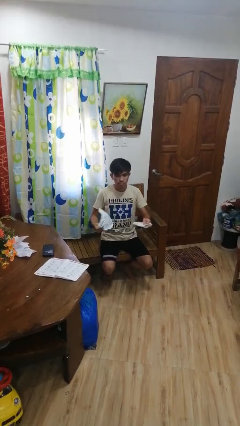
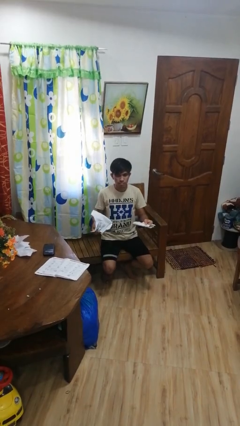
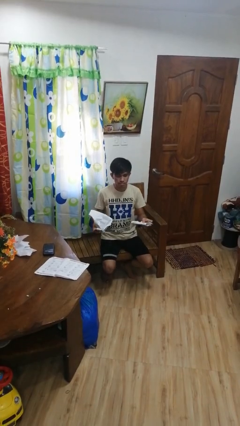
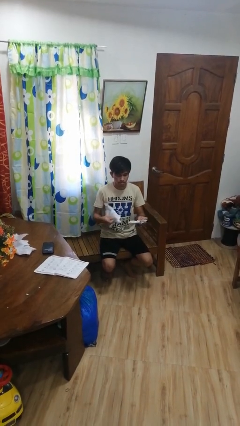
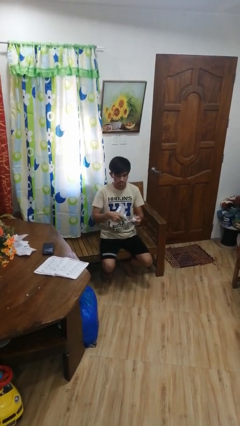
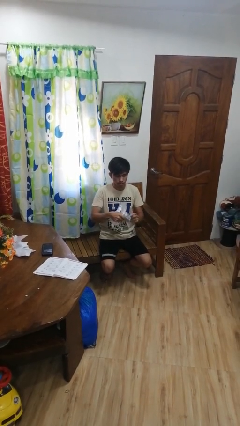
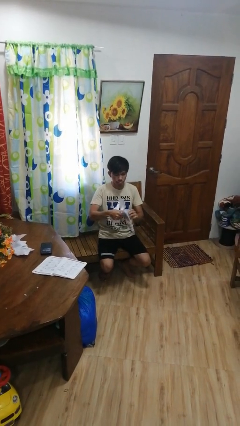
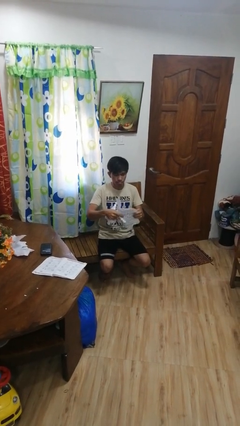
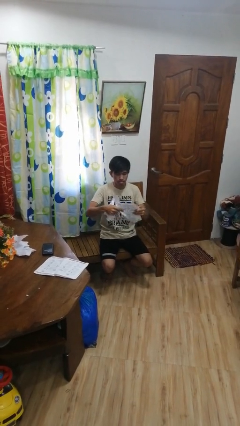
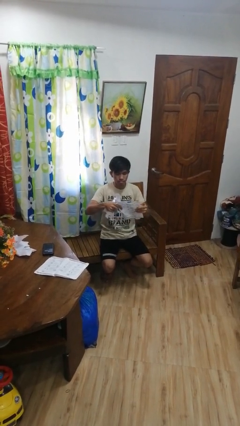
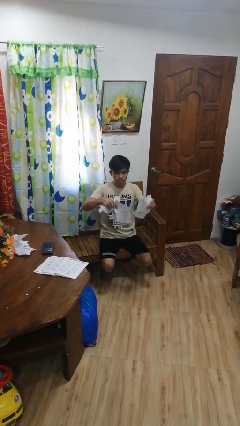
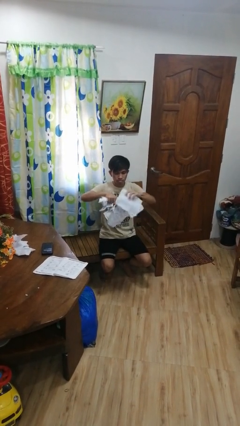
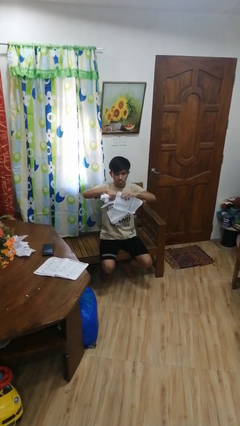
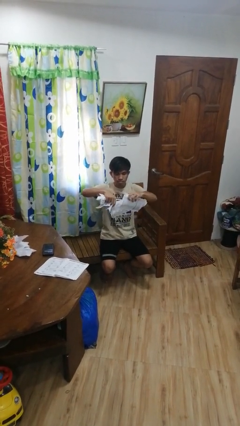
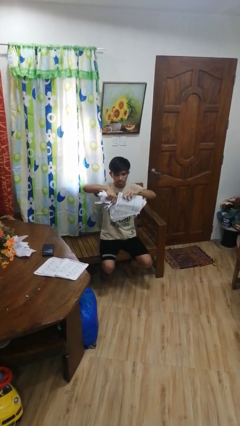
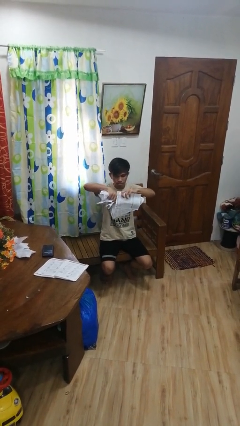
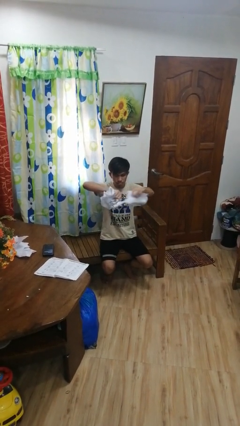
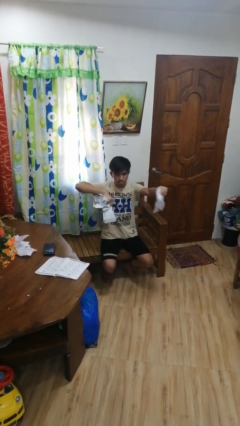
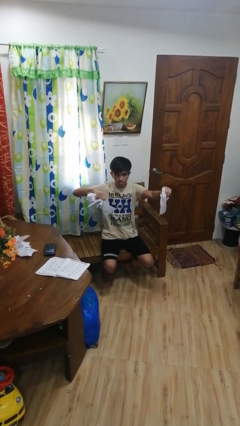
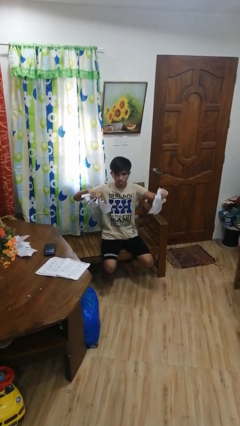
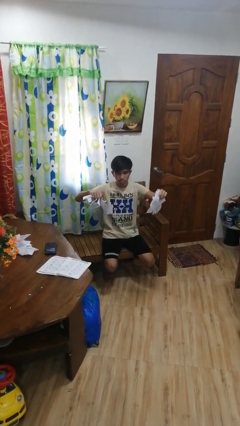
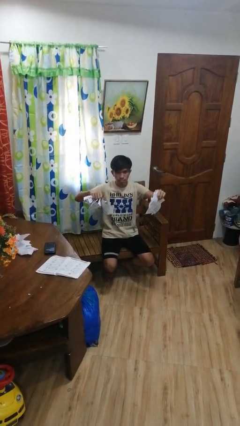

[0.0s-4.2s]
person tears paper

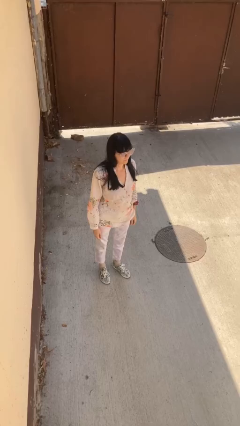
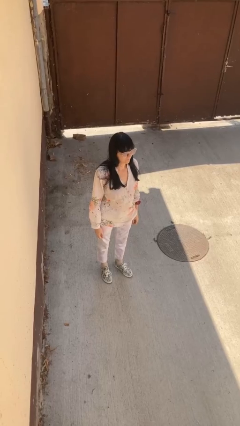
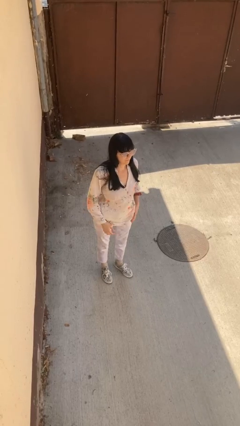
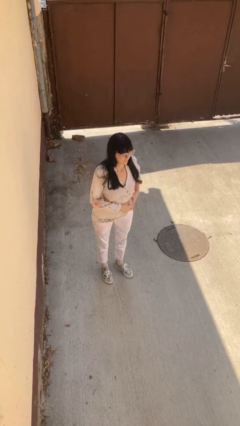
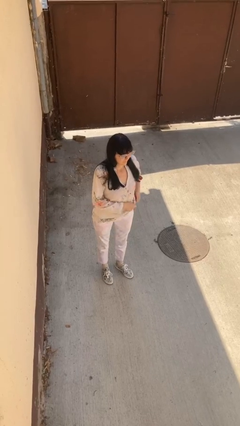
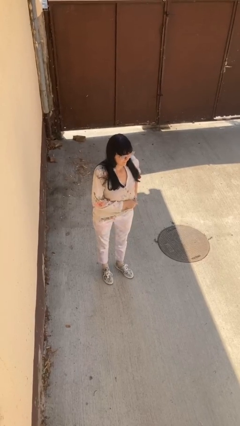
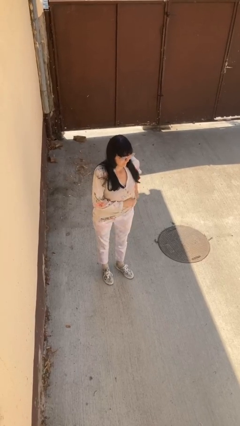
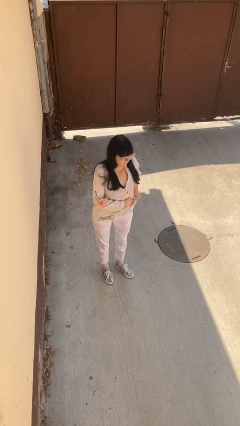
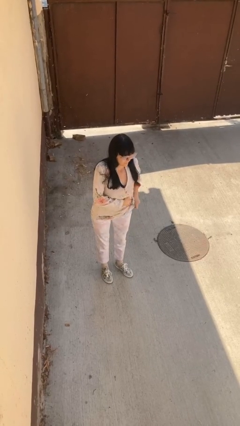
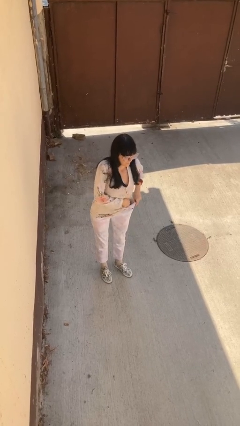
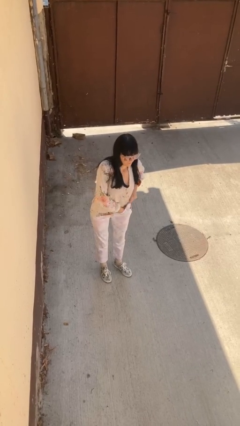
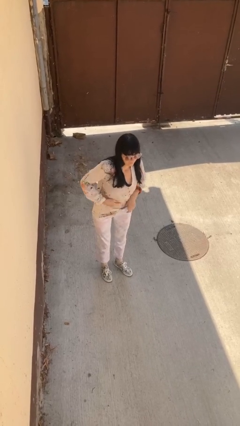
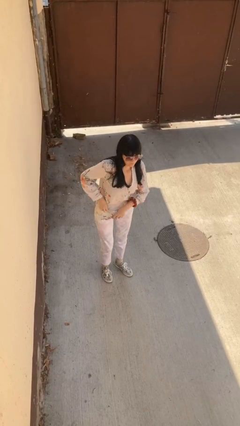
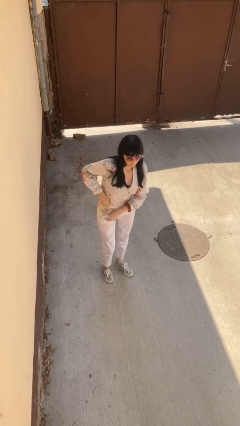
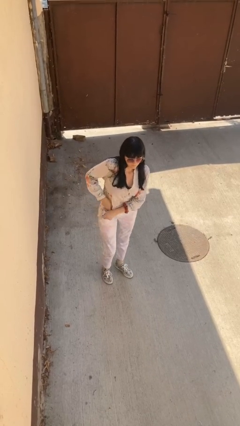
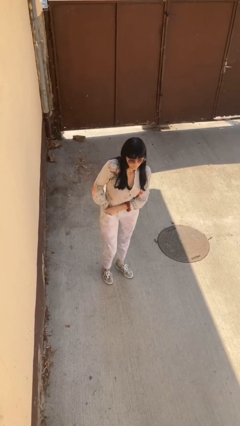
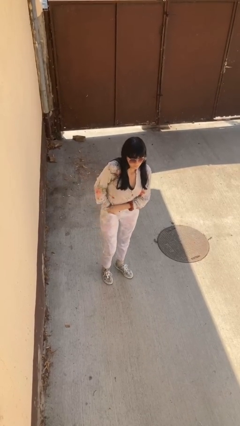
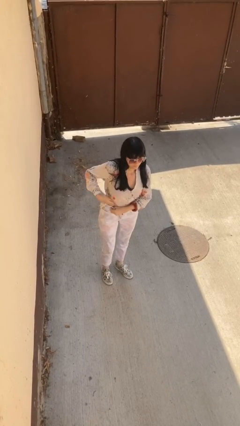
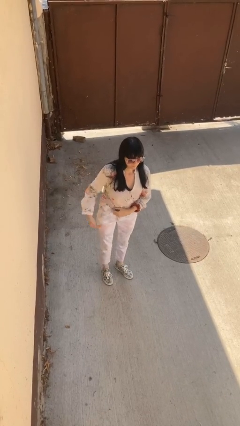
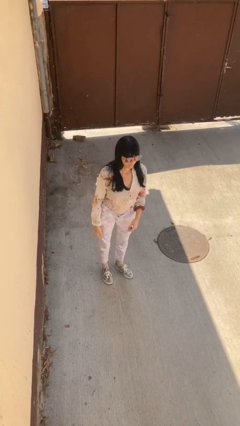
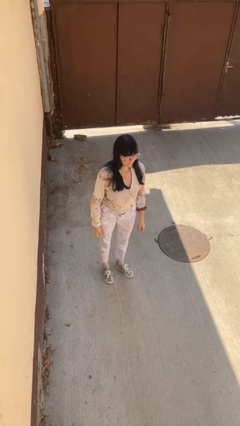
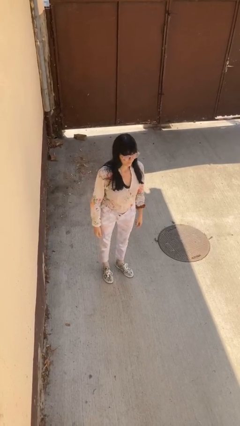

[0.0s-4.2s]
person tucks in shirt

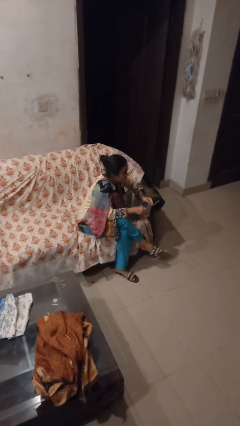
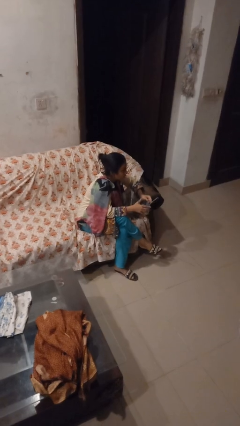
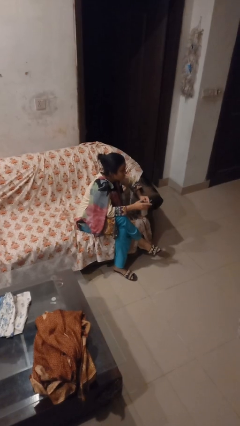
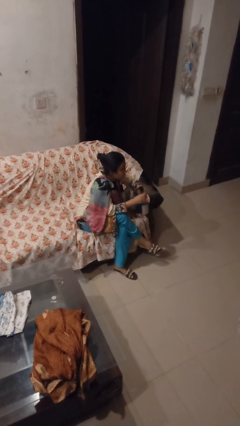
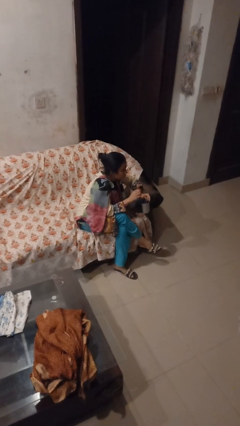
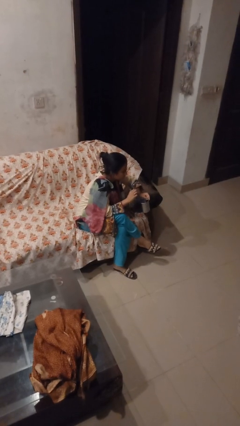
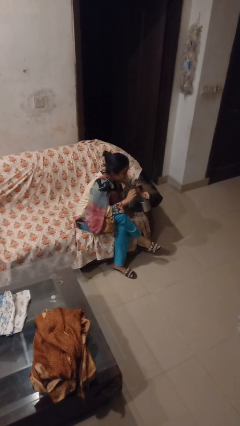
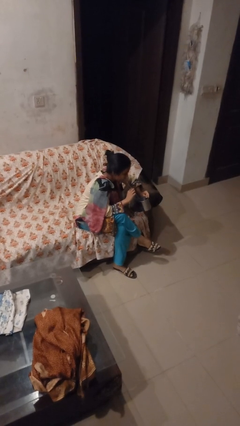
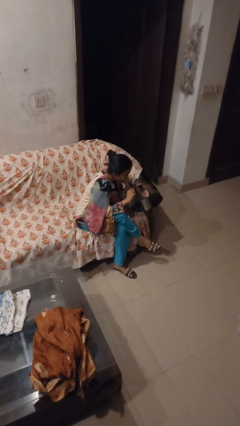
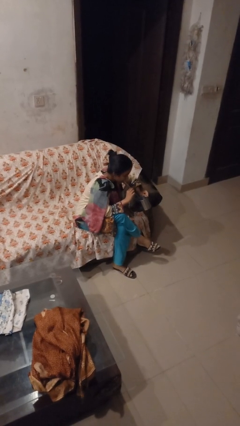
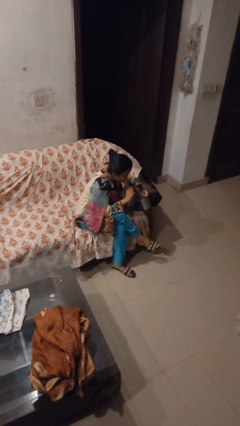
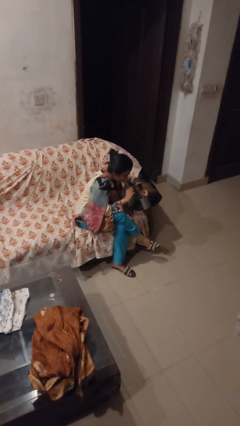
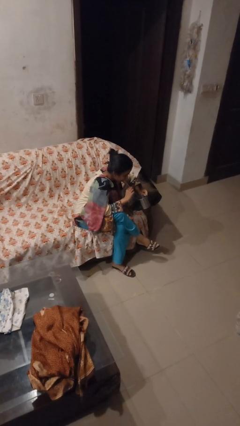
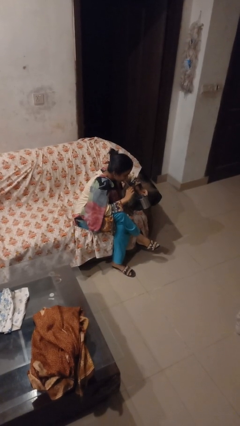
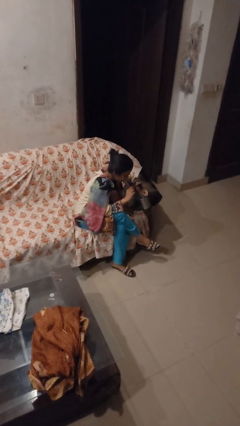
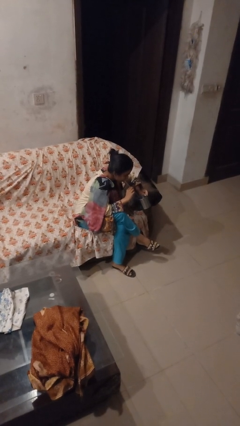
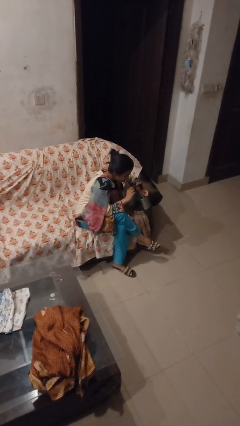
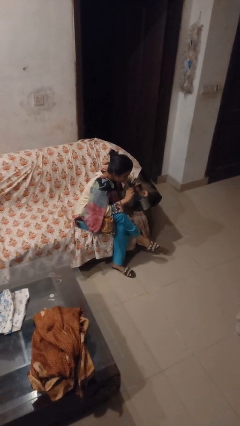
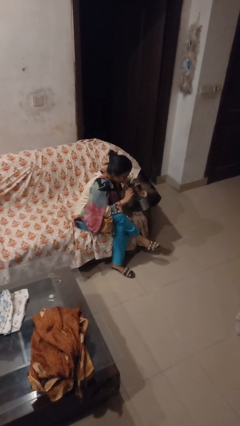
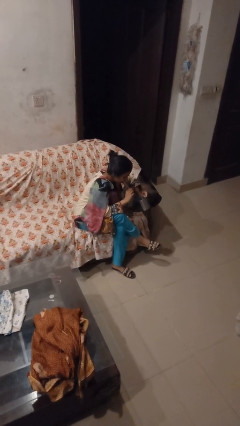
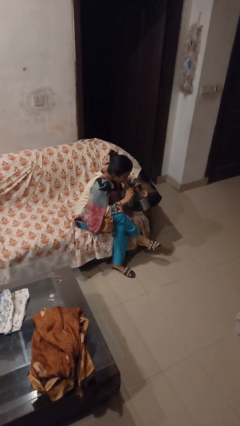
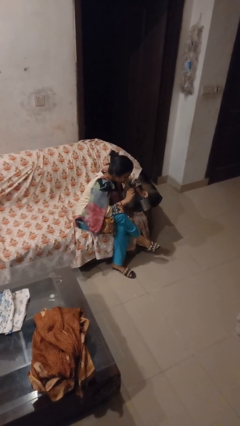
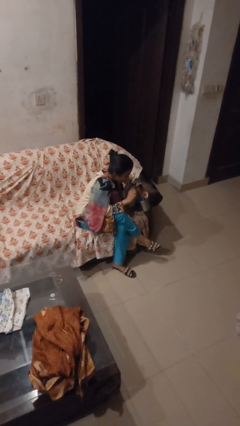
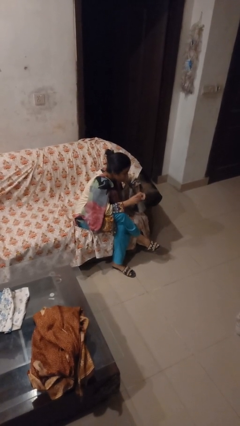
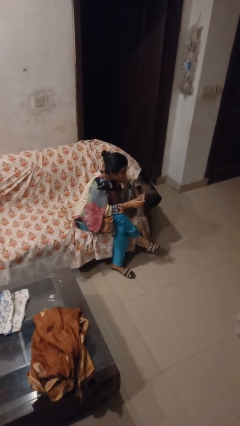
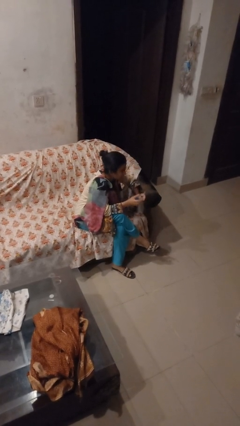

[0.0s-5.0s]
person drinks from straw

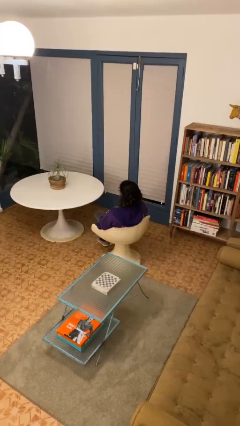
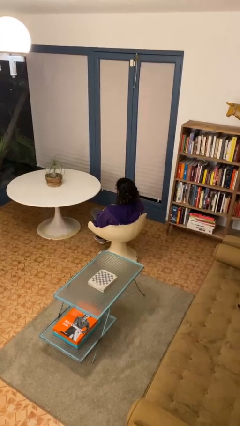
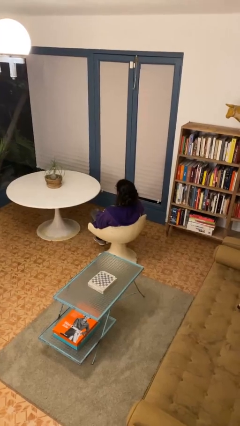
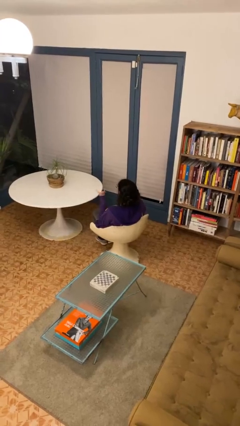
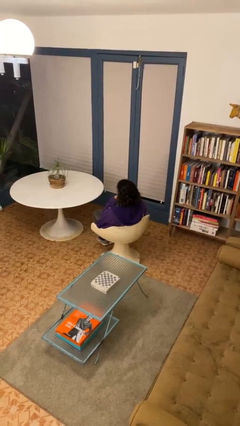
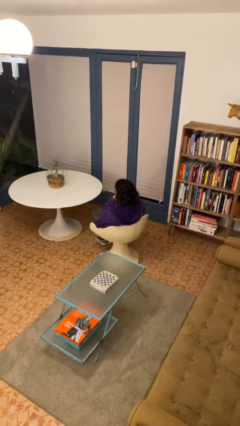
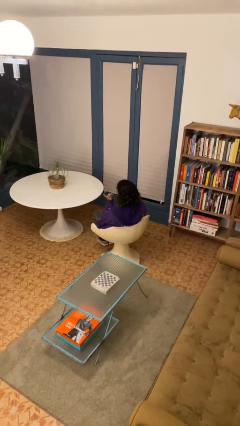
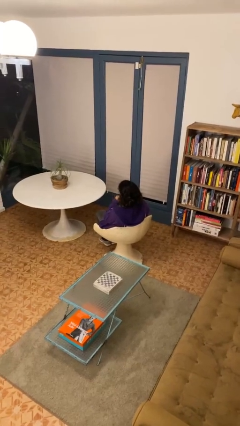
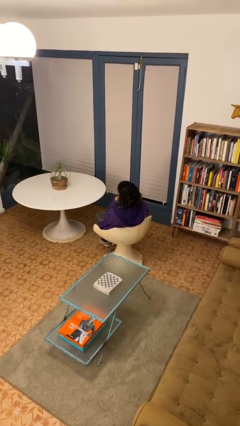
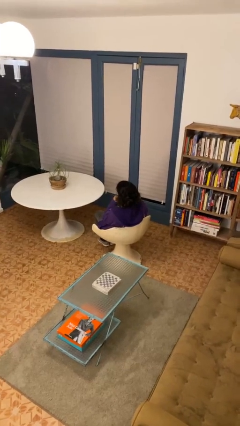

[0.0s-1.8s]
person gestures listen closely

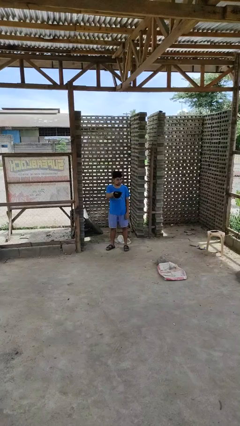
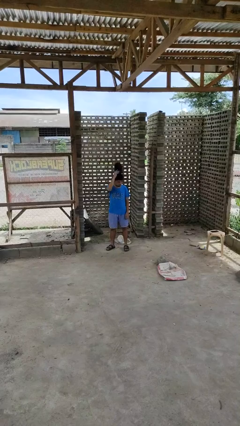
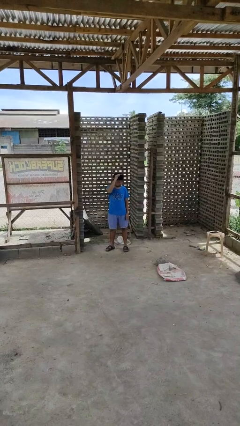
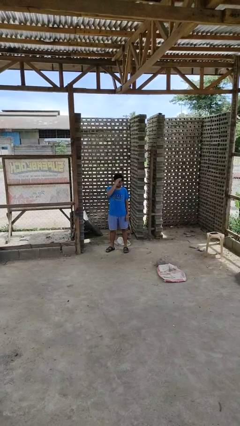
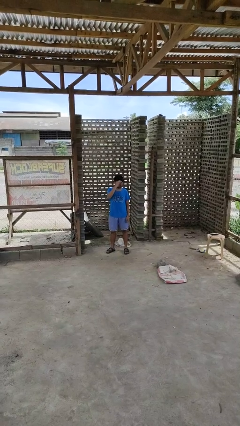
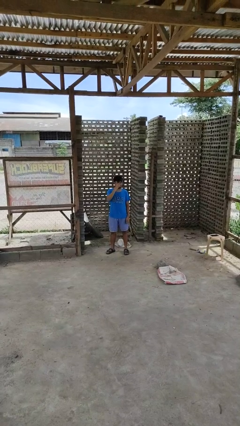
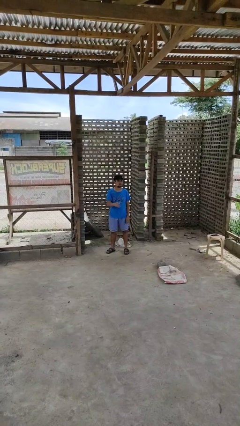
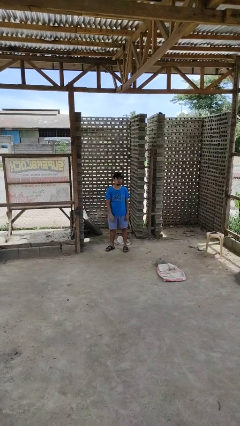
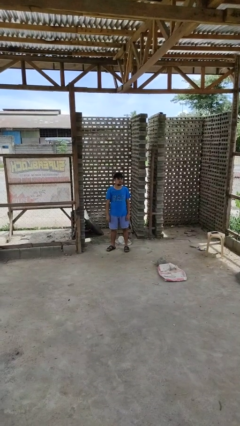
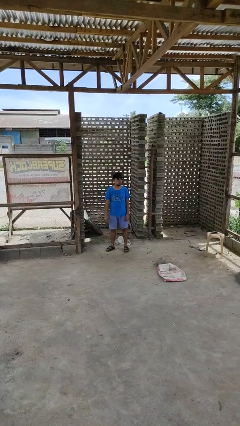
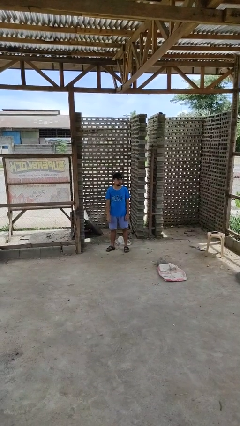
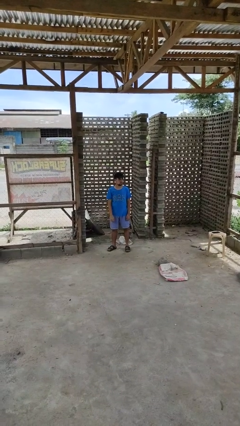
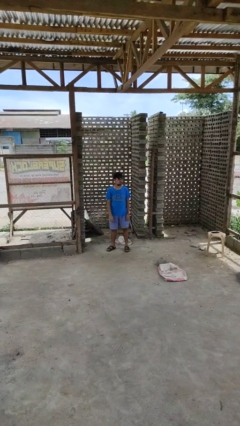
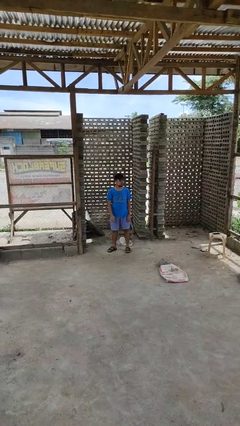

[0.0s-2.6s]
person puts on hat

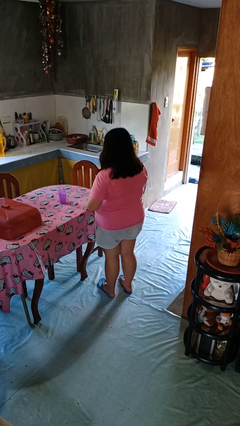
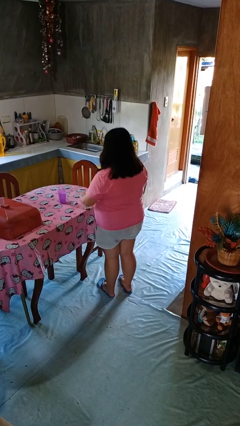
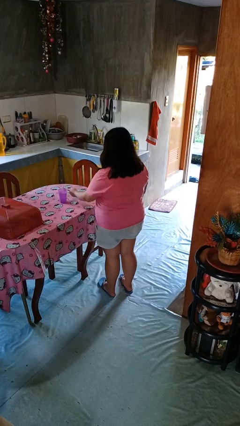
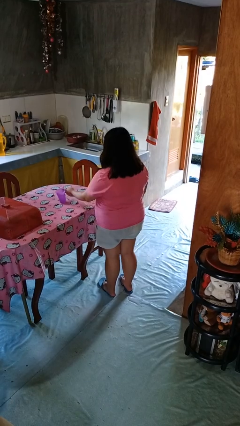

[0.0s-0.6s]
person knocks over glass
